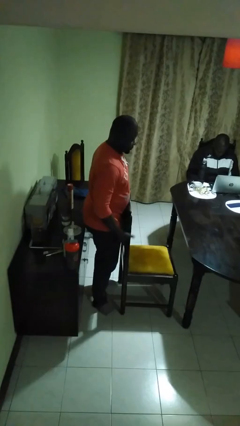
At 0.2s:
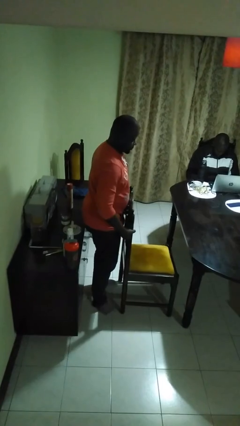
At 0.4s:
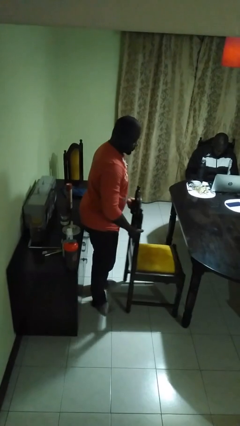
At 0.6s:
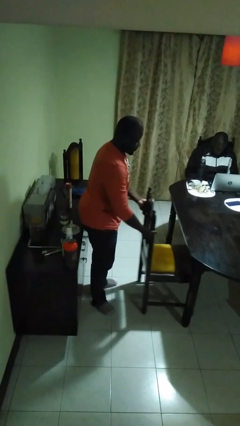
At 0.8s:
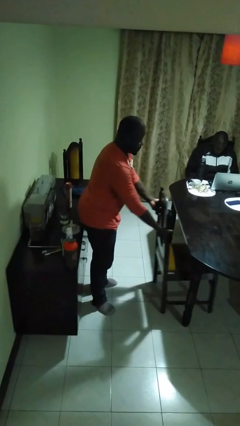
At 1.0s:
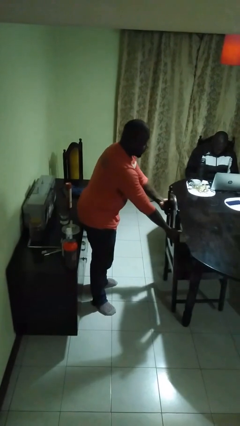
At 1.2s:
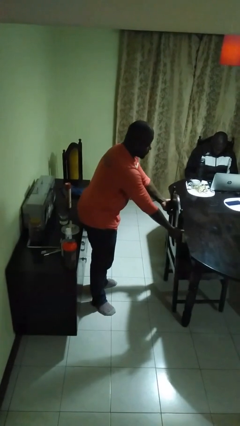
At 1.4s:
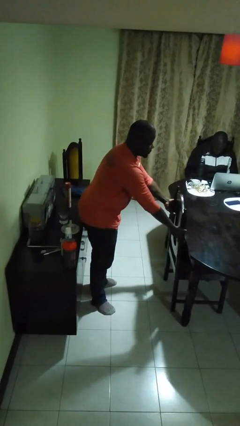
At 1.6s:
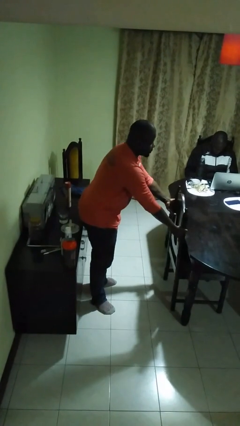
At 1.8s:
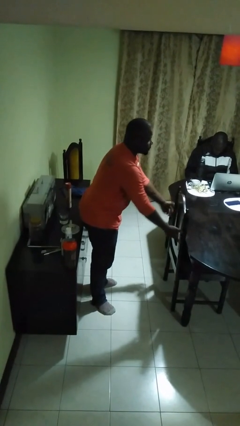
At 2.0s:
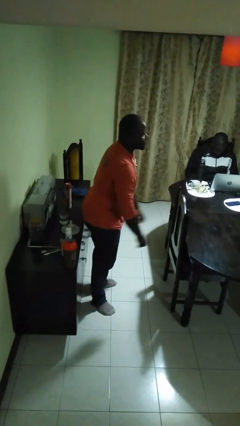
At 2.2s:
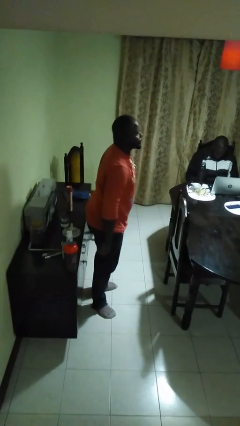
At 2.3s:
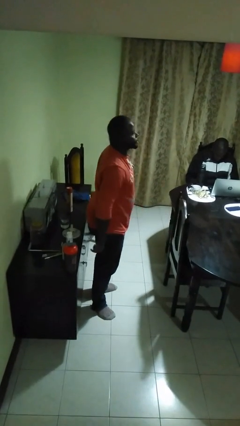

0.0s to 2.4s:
person pushes in chair

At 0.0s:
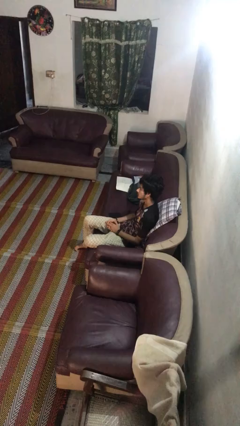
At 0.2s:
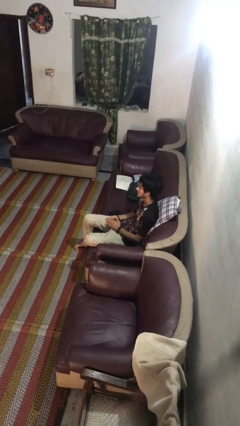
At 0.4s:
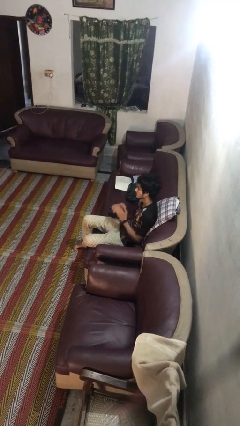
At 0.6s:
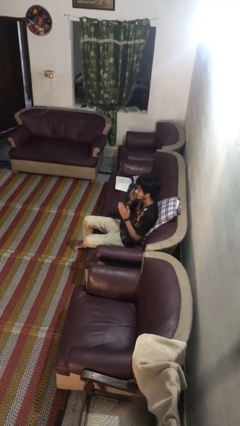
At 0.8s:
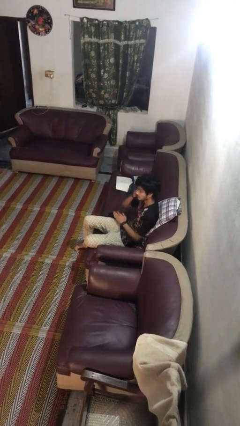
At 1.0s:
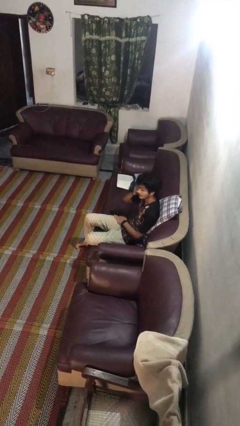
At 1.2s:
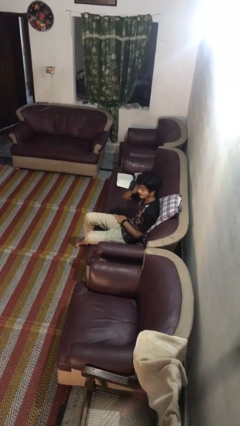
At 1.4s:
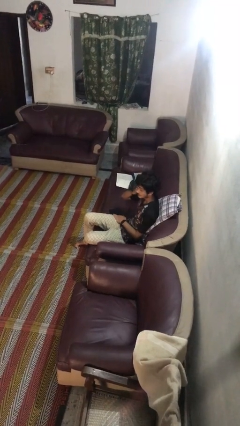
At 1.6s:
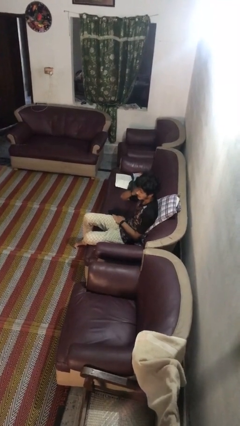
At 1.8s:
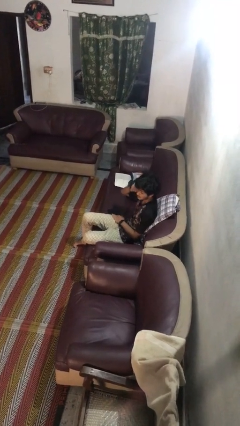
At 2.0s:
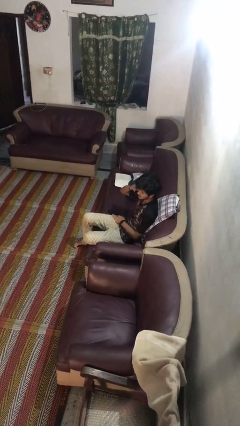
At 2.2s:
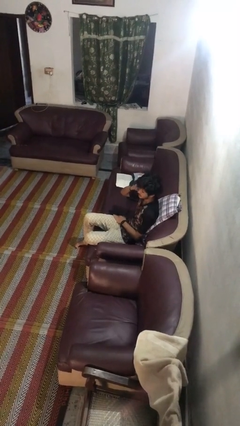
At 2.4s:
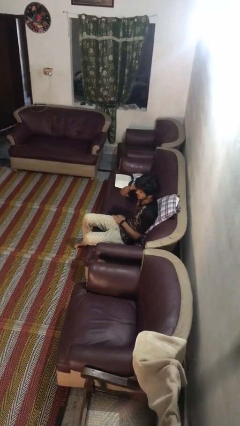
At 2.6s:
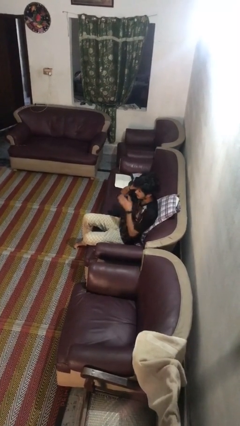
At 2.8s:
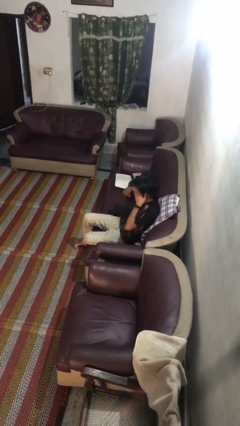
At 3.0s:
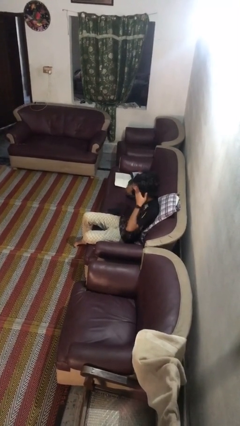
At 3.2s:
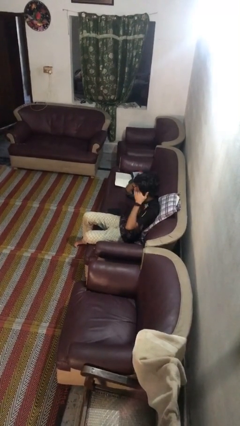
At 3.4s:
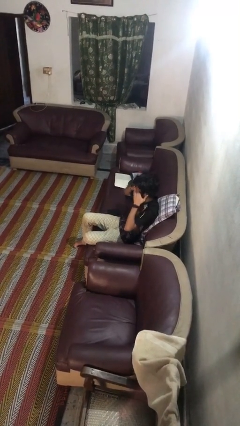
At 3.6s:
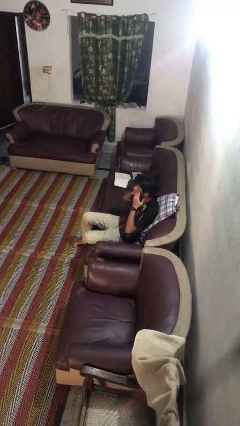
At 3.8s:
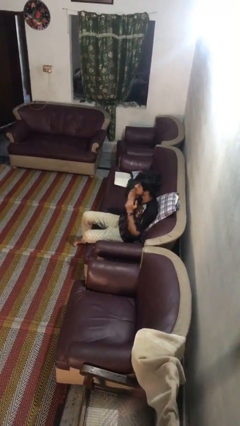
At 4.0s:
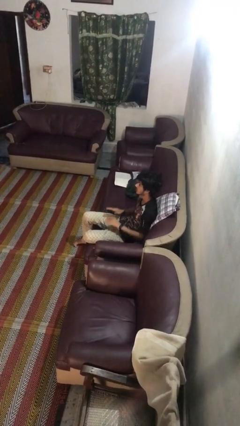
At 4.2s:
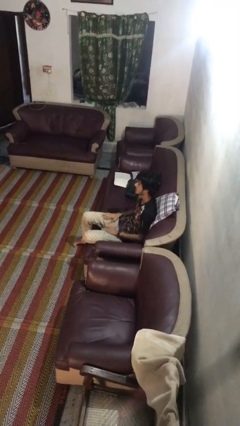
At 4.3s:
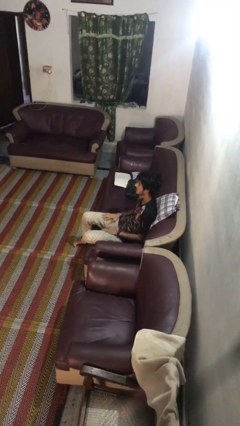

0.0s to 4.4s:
person rubs eyes

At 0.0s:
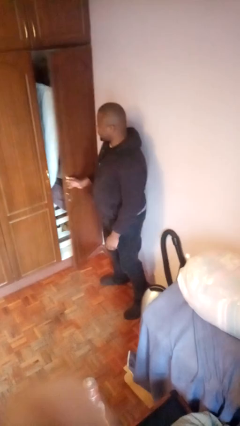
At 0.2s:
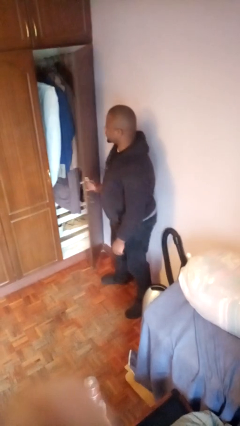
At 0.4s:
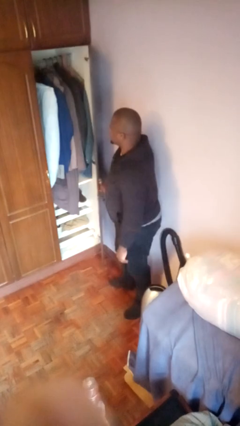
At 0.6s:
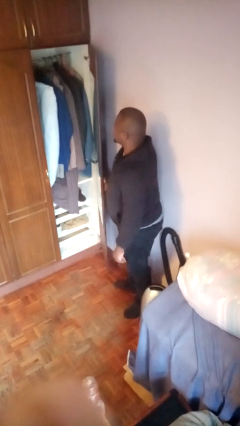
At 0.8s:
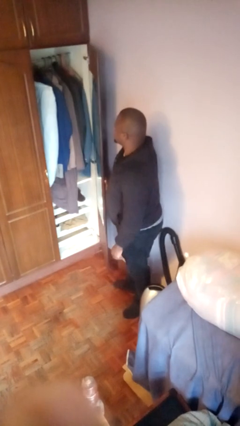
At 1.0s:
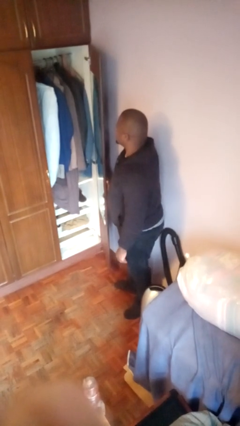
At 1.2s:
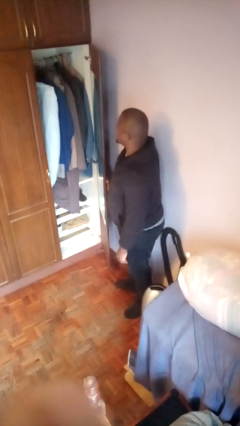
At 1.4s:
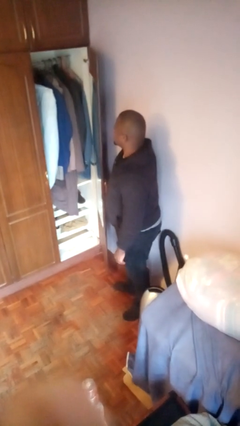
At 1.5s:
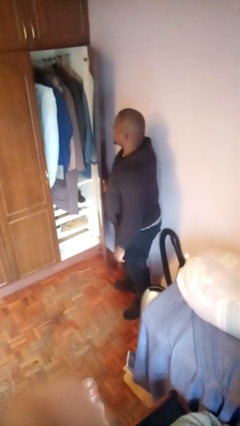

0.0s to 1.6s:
person opens closet door

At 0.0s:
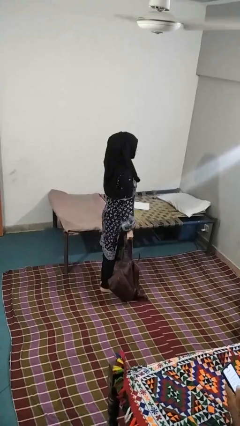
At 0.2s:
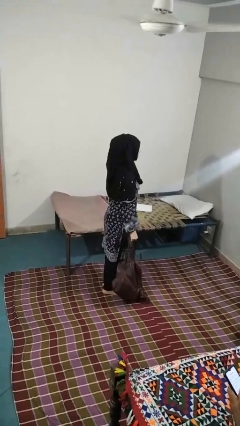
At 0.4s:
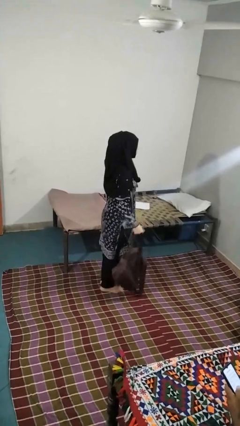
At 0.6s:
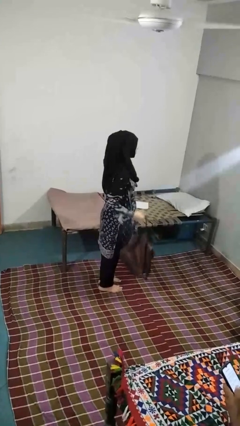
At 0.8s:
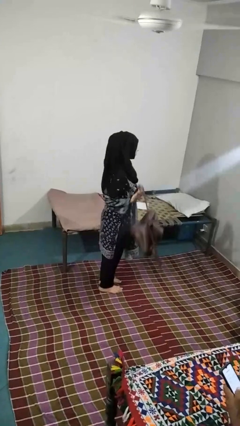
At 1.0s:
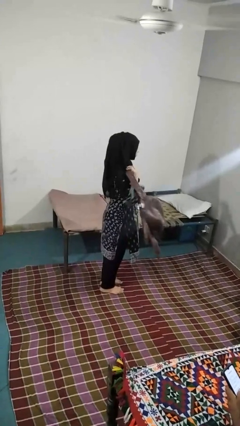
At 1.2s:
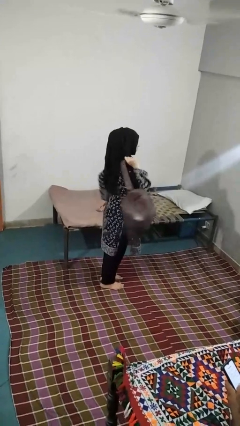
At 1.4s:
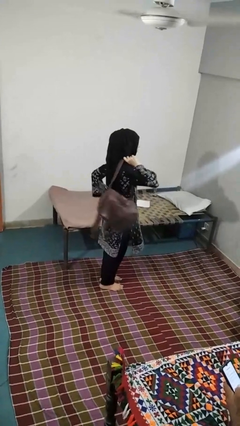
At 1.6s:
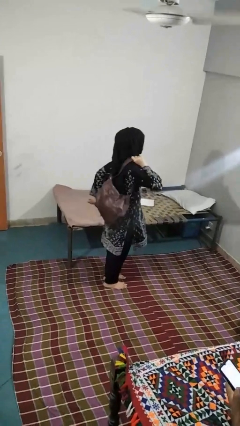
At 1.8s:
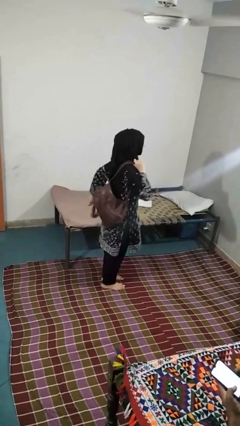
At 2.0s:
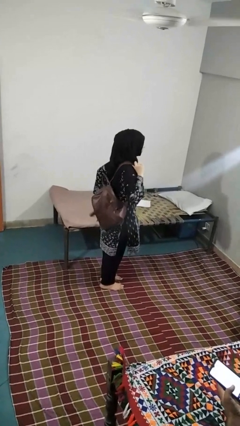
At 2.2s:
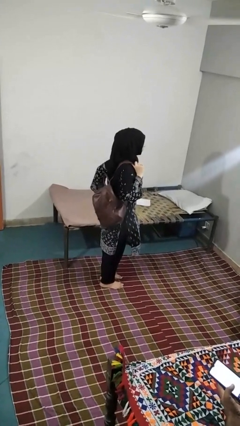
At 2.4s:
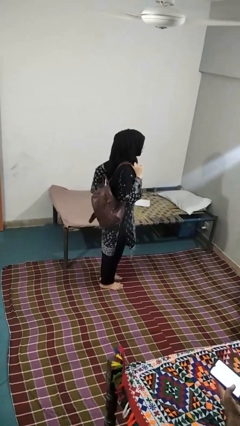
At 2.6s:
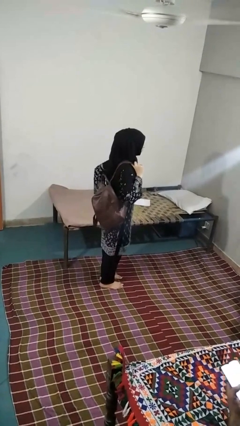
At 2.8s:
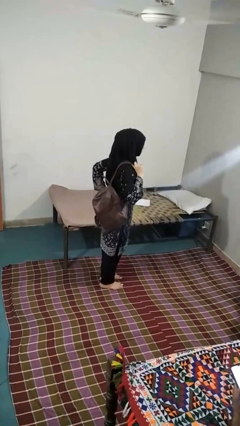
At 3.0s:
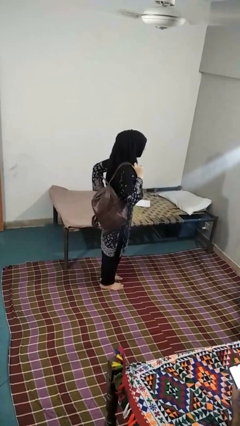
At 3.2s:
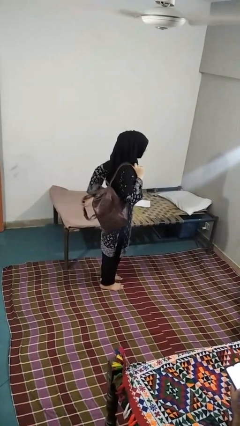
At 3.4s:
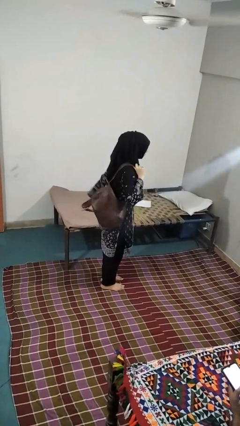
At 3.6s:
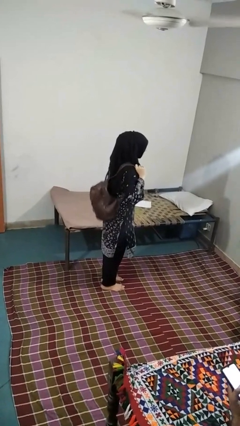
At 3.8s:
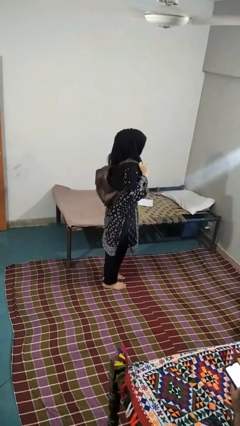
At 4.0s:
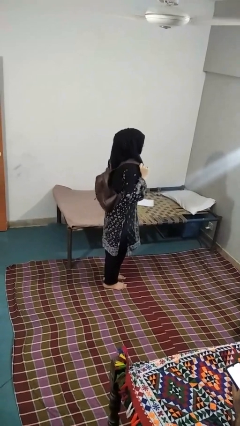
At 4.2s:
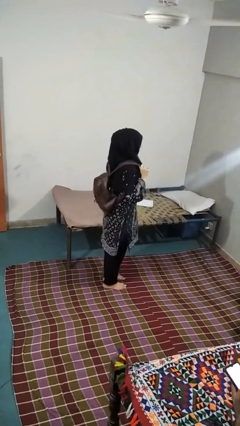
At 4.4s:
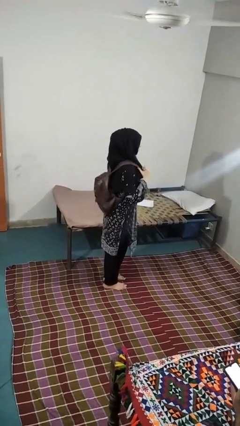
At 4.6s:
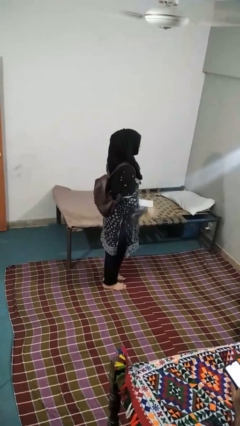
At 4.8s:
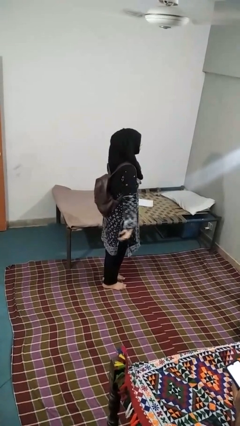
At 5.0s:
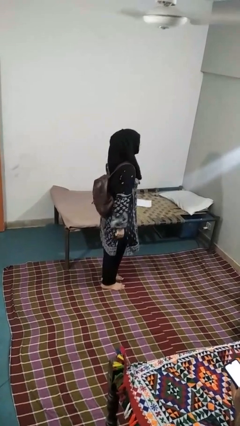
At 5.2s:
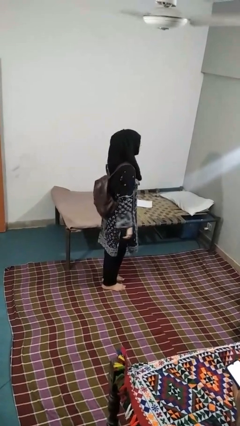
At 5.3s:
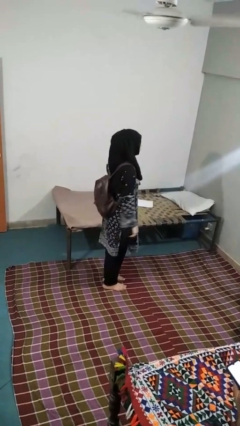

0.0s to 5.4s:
person puts on backpack

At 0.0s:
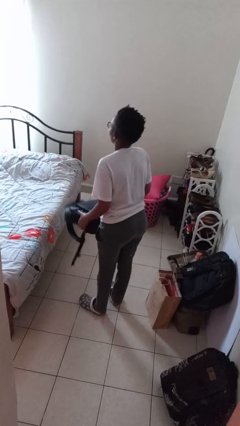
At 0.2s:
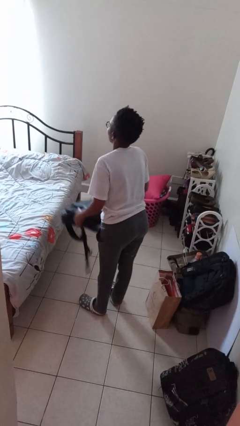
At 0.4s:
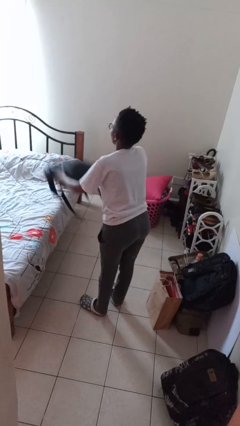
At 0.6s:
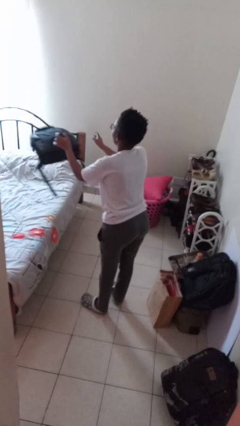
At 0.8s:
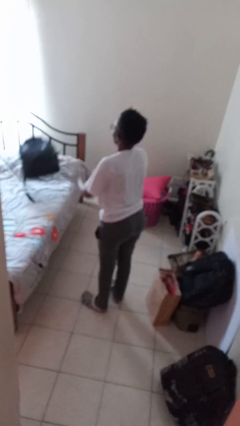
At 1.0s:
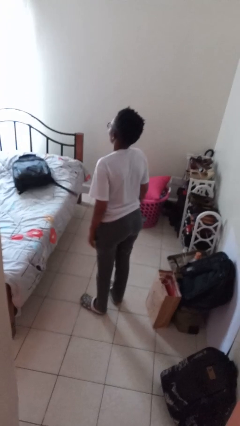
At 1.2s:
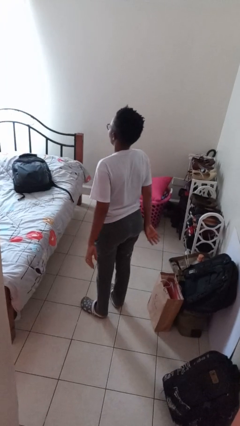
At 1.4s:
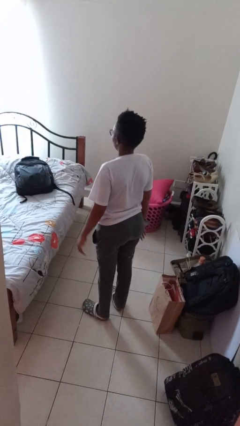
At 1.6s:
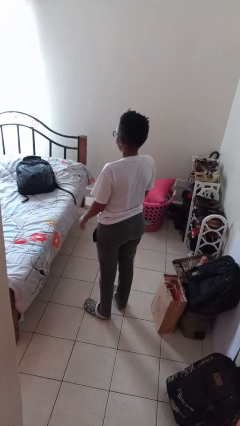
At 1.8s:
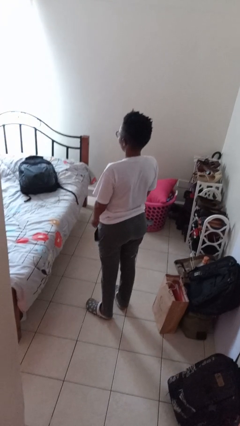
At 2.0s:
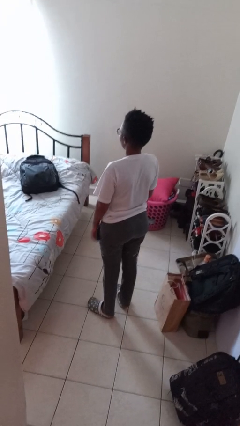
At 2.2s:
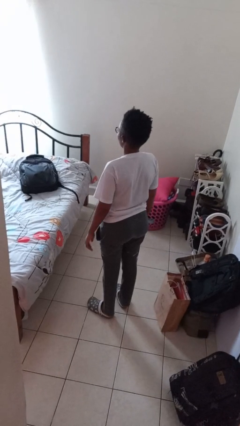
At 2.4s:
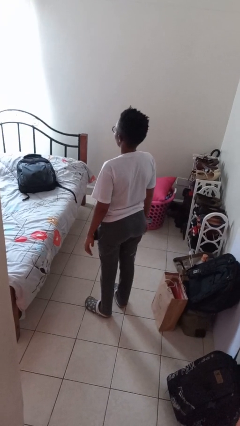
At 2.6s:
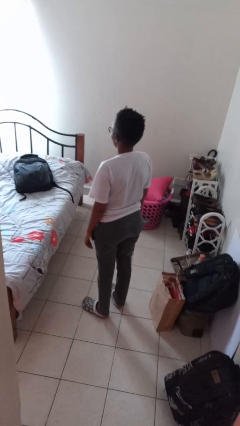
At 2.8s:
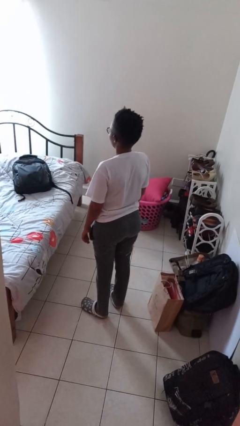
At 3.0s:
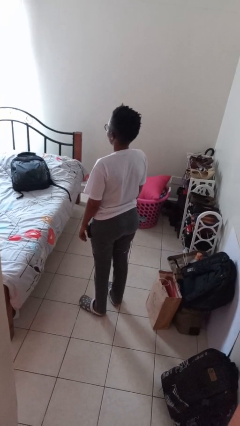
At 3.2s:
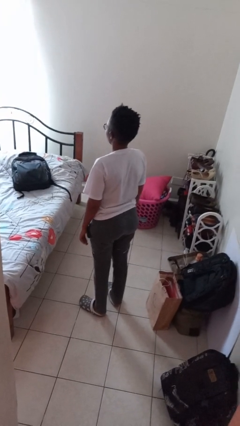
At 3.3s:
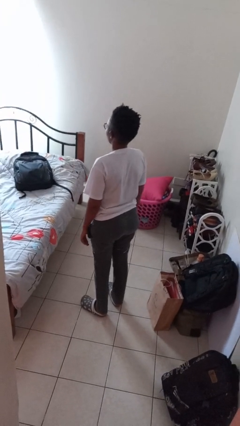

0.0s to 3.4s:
person throws object on bed

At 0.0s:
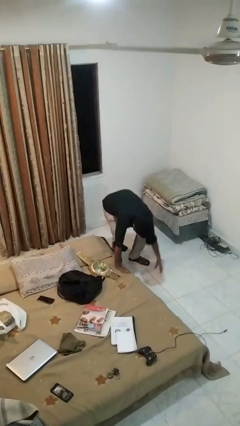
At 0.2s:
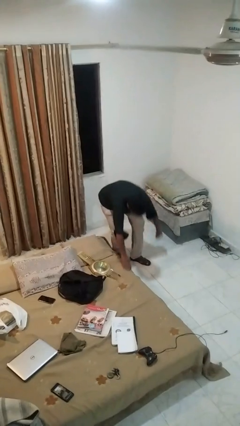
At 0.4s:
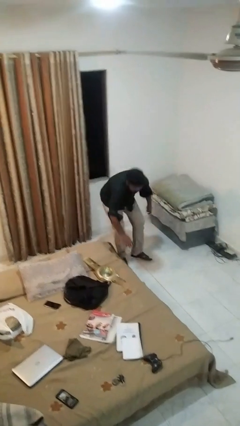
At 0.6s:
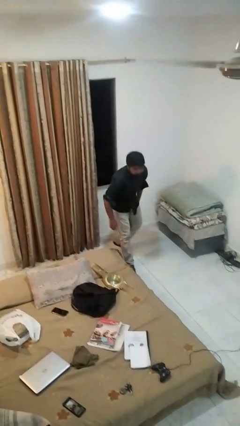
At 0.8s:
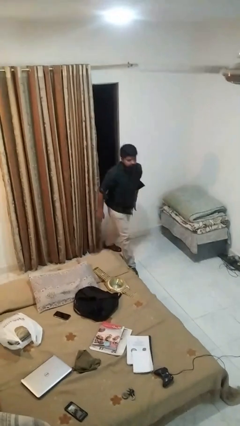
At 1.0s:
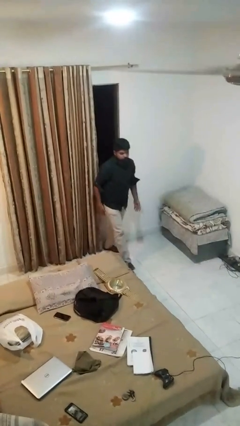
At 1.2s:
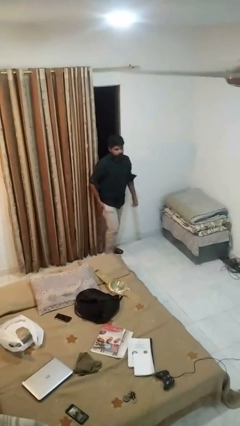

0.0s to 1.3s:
person stands up from floor
